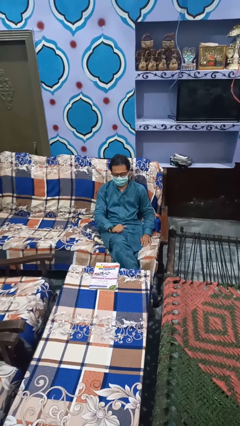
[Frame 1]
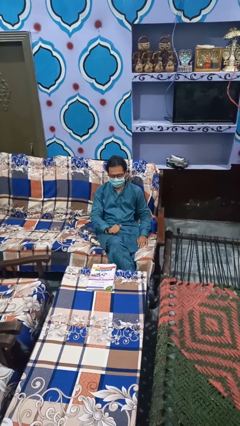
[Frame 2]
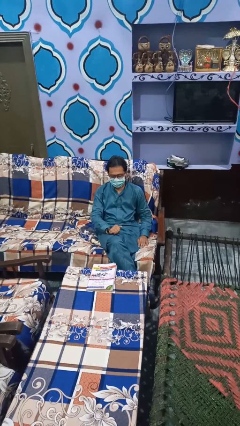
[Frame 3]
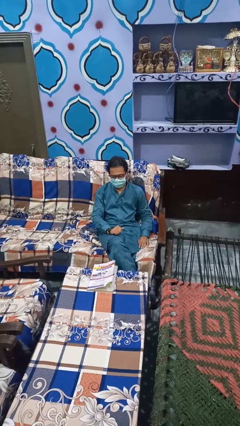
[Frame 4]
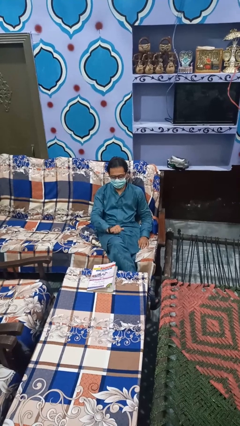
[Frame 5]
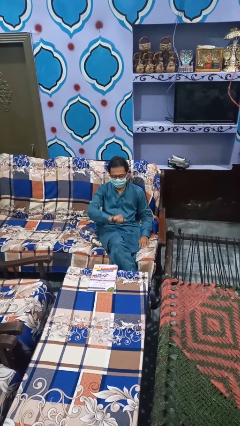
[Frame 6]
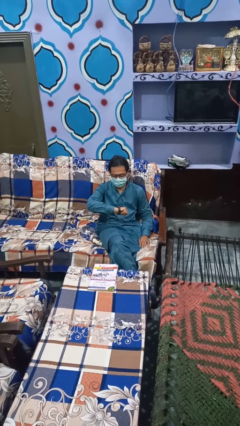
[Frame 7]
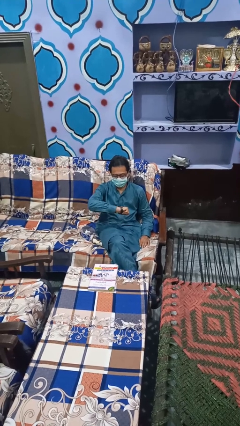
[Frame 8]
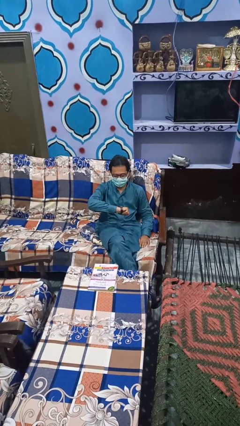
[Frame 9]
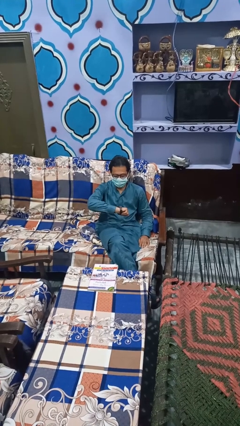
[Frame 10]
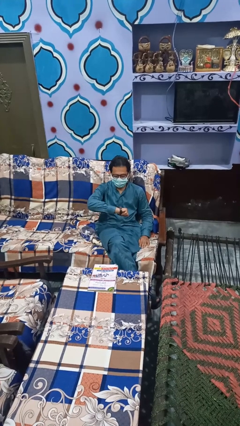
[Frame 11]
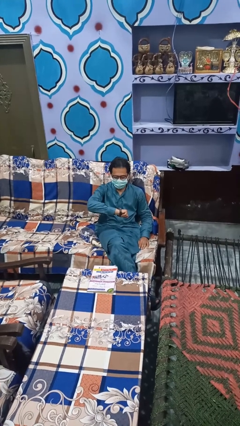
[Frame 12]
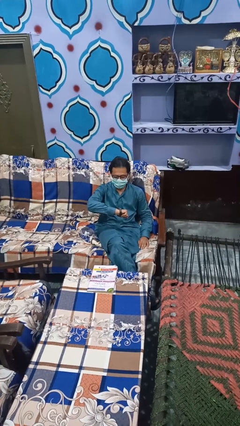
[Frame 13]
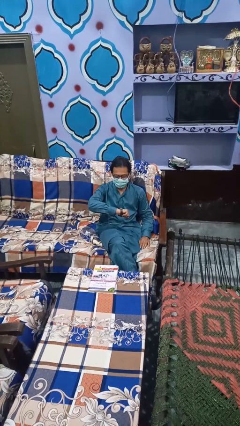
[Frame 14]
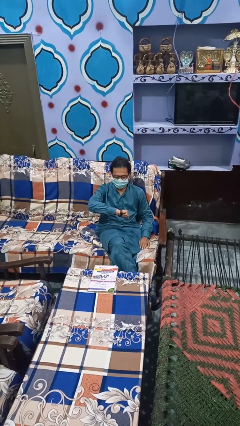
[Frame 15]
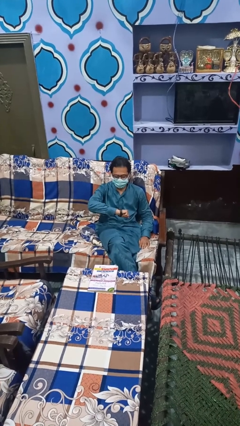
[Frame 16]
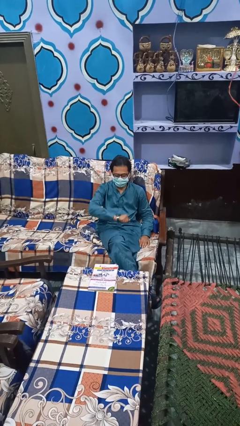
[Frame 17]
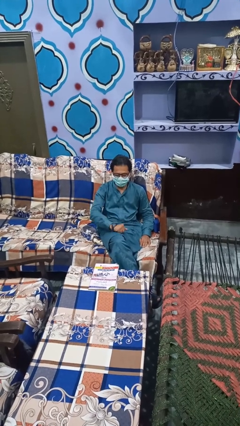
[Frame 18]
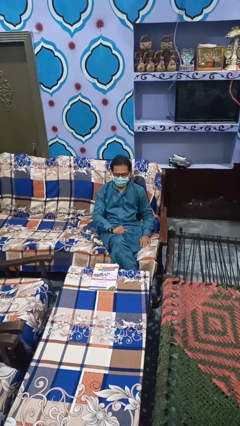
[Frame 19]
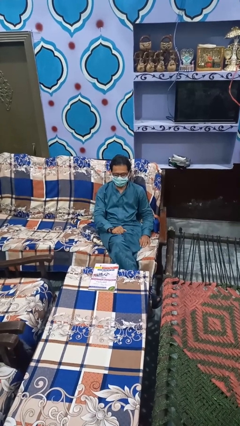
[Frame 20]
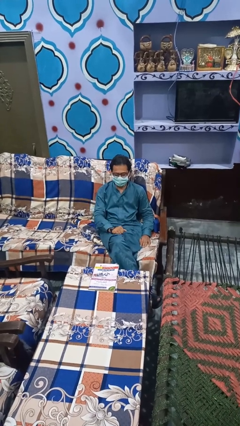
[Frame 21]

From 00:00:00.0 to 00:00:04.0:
person looks at wristwatch

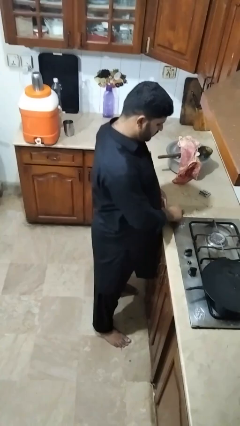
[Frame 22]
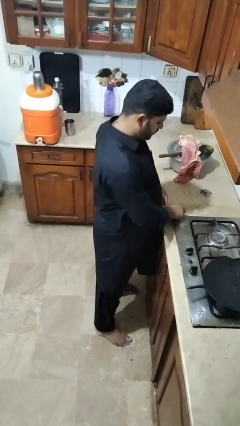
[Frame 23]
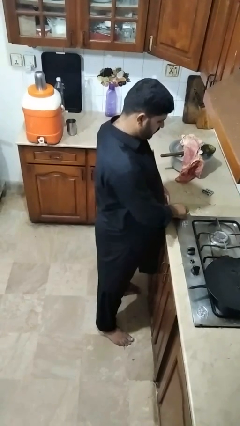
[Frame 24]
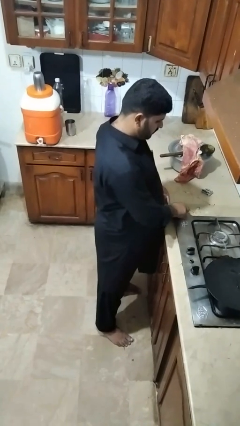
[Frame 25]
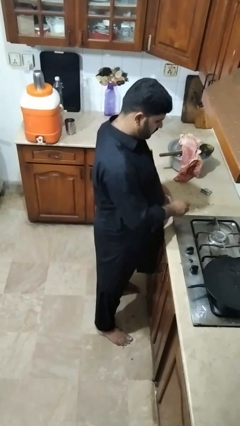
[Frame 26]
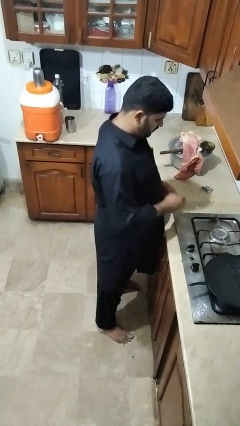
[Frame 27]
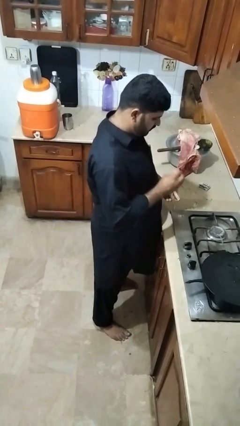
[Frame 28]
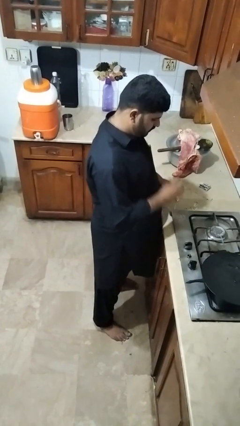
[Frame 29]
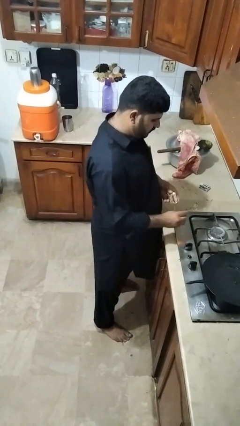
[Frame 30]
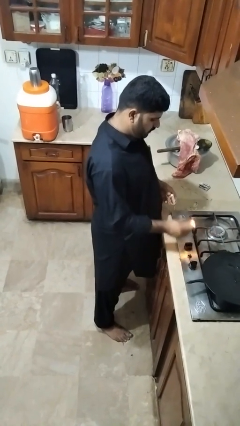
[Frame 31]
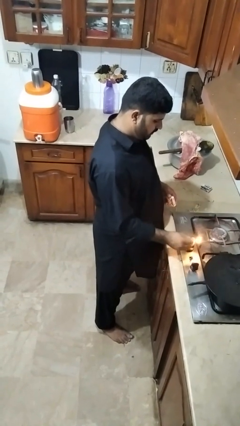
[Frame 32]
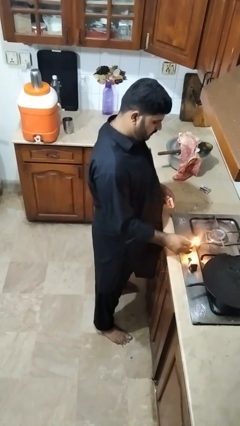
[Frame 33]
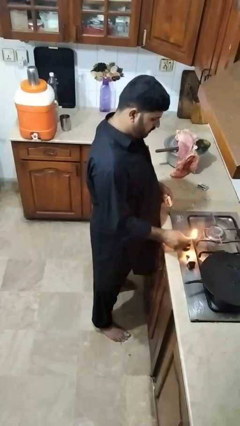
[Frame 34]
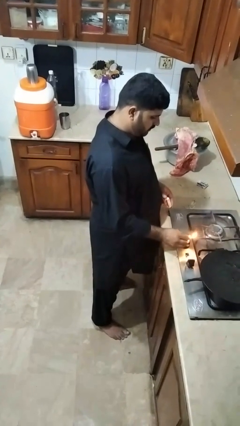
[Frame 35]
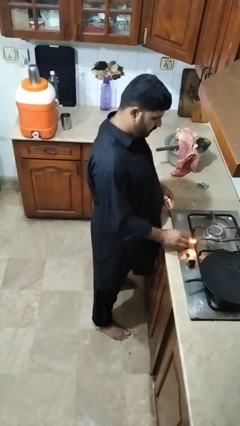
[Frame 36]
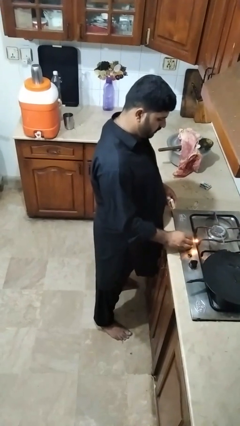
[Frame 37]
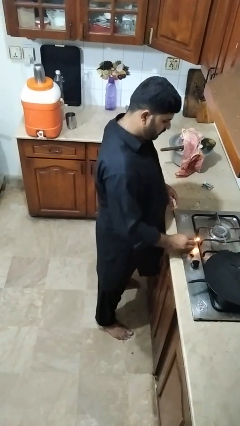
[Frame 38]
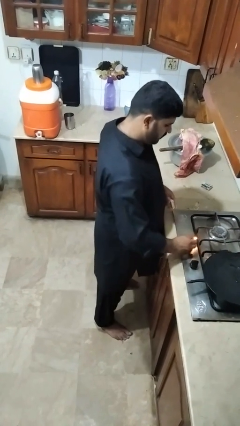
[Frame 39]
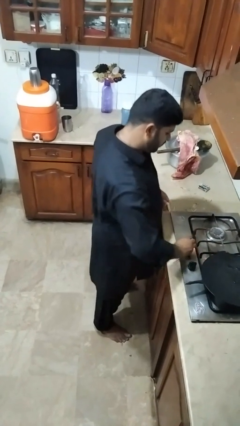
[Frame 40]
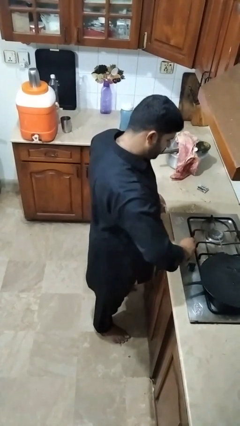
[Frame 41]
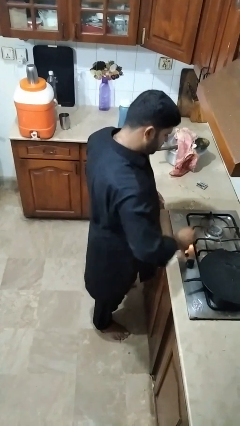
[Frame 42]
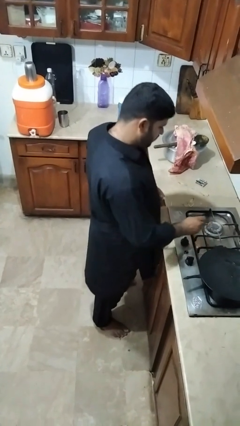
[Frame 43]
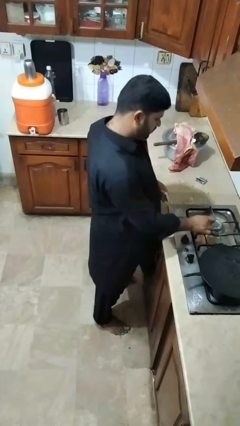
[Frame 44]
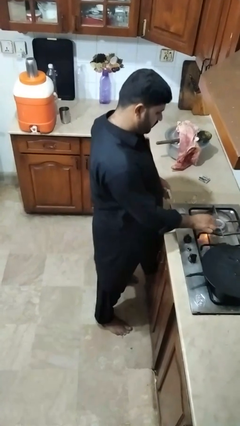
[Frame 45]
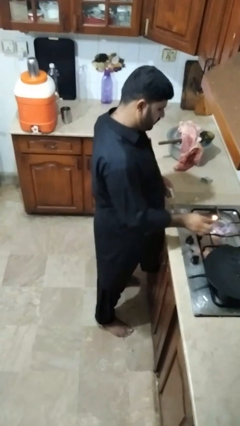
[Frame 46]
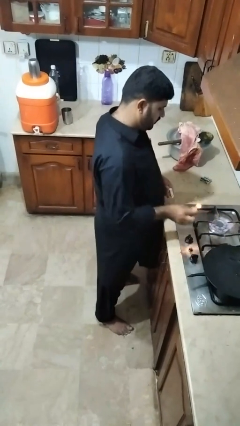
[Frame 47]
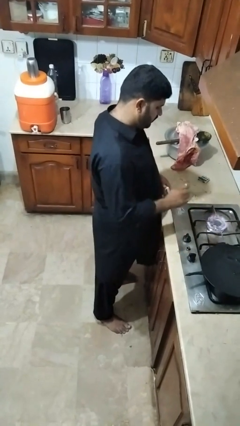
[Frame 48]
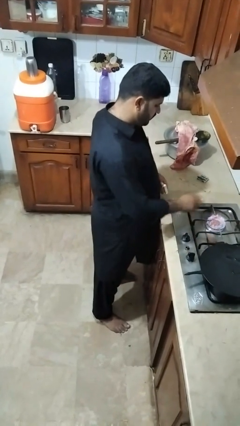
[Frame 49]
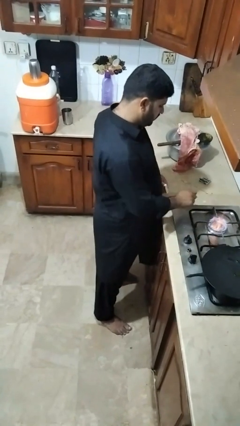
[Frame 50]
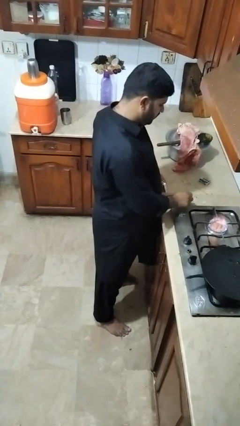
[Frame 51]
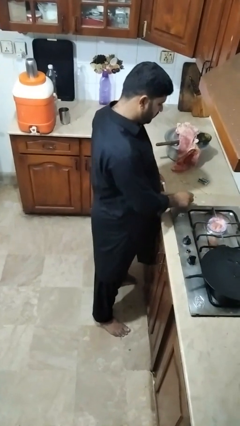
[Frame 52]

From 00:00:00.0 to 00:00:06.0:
person turns on stovetop

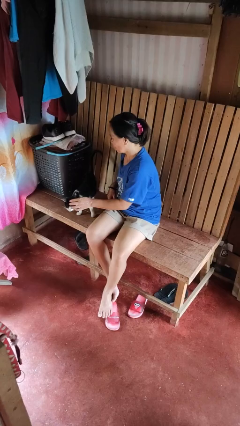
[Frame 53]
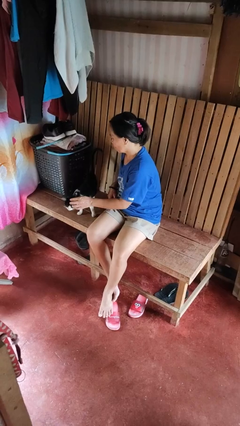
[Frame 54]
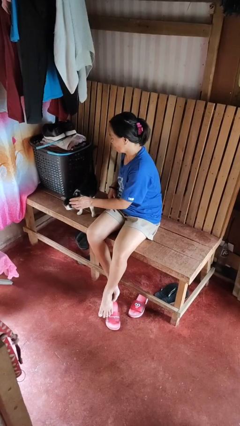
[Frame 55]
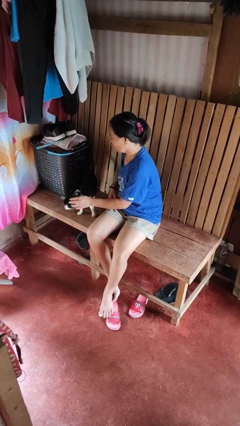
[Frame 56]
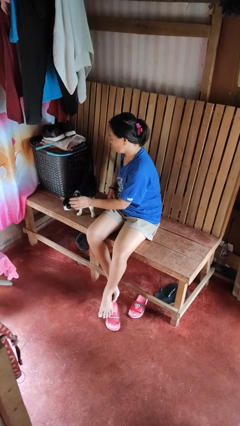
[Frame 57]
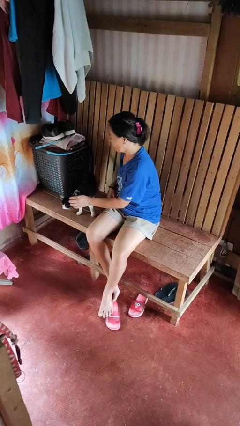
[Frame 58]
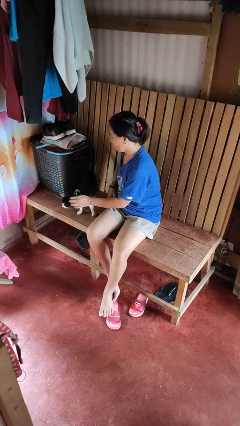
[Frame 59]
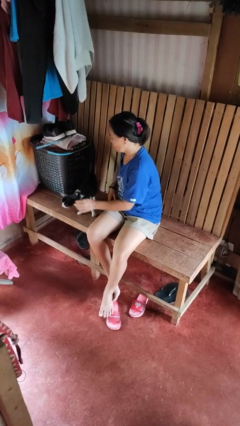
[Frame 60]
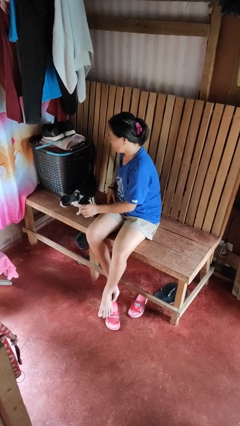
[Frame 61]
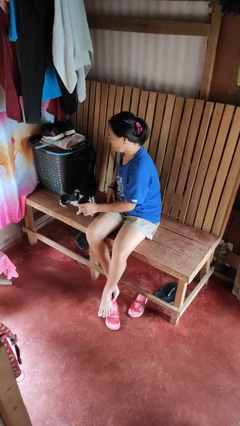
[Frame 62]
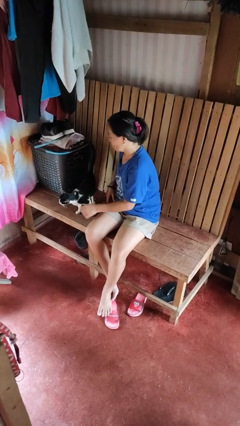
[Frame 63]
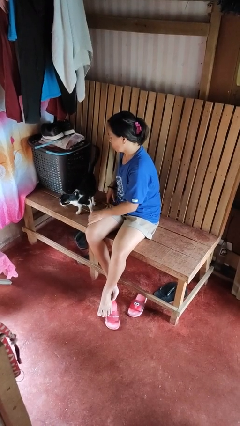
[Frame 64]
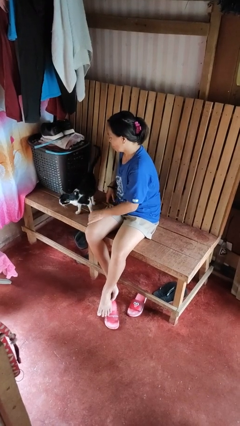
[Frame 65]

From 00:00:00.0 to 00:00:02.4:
person pets cat

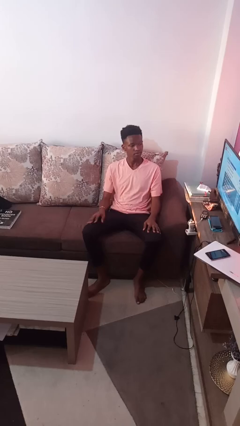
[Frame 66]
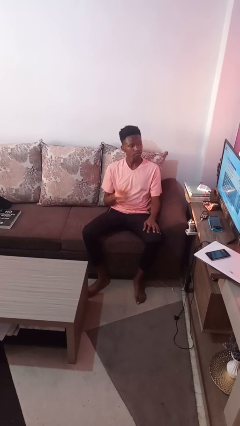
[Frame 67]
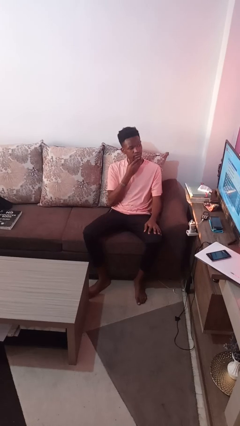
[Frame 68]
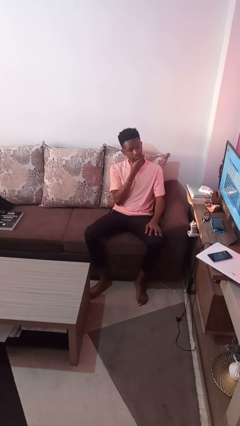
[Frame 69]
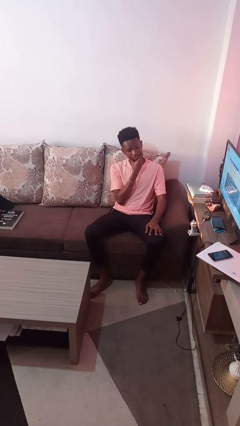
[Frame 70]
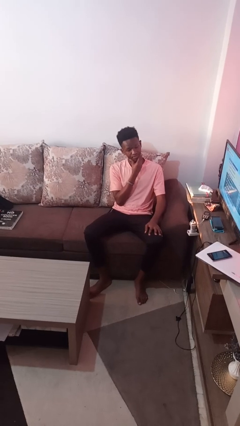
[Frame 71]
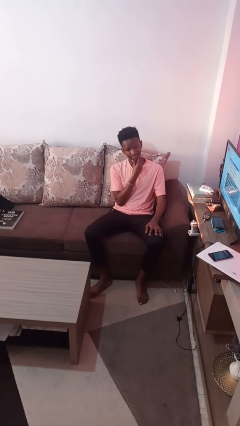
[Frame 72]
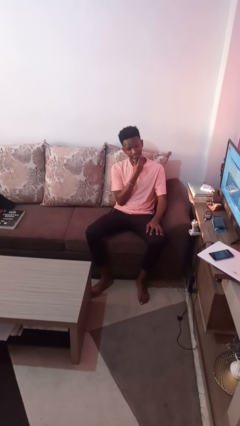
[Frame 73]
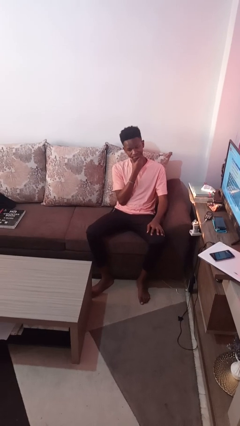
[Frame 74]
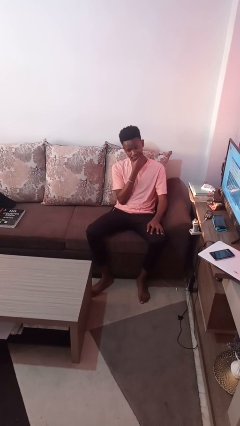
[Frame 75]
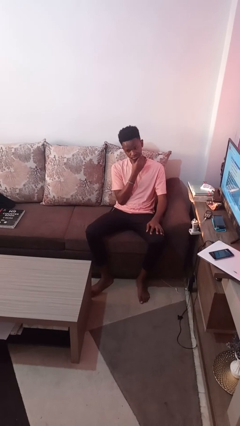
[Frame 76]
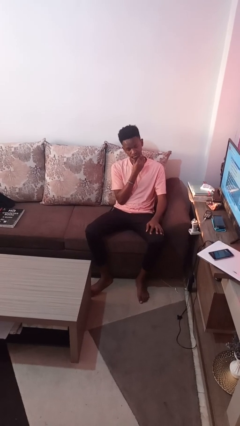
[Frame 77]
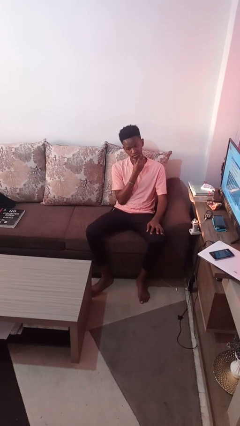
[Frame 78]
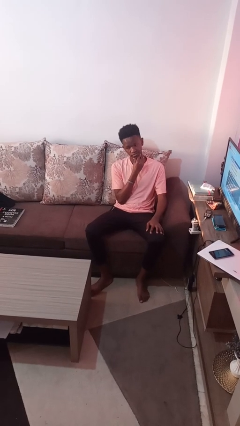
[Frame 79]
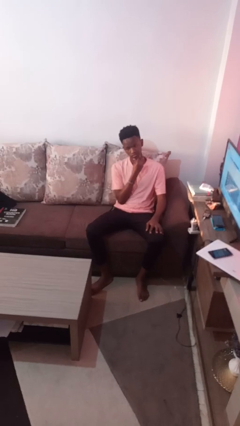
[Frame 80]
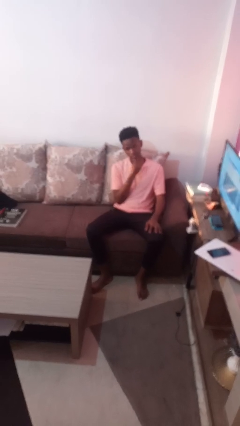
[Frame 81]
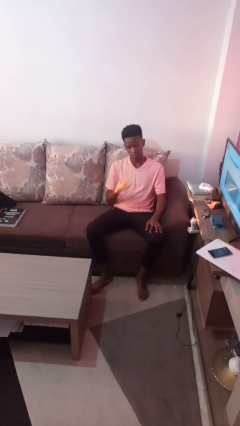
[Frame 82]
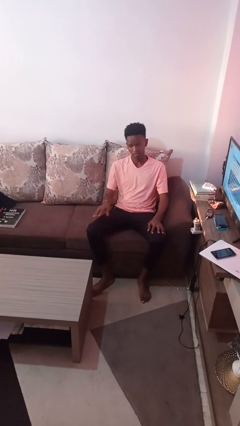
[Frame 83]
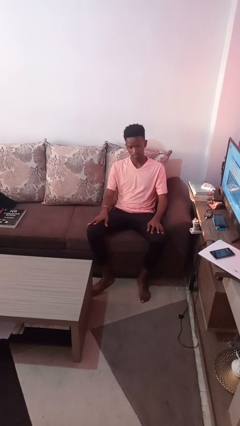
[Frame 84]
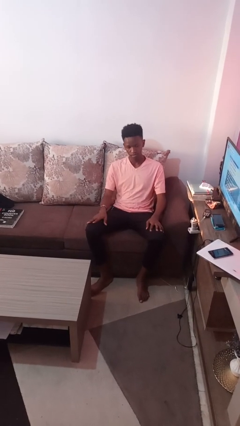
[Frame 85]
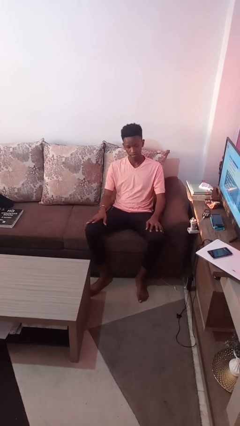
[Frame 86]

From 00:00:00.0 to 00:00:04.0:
person strokes chin

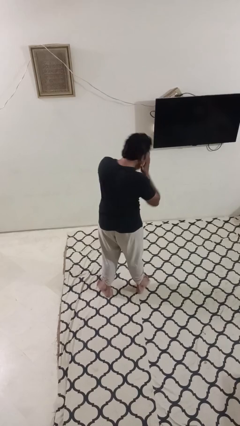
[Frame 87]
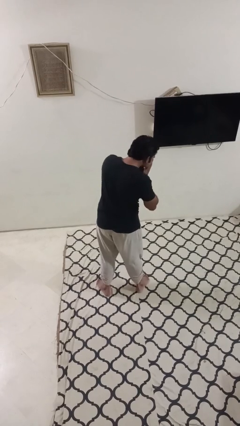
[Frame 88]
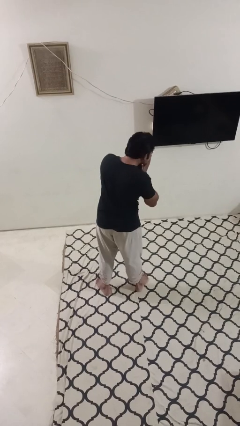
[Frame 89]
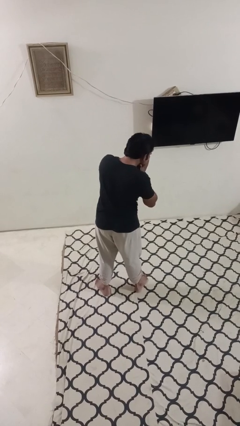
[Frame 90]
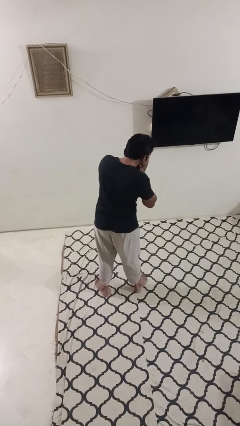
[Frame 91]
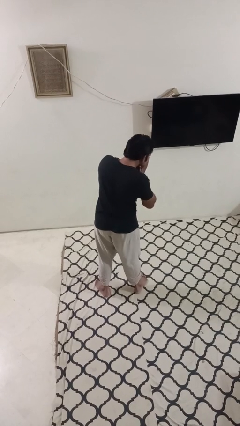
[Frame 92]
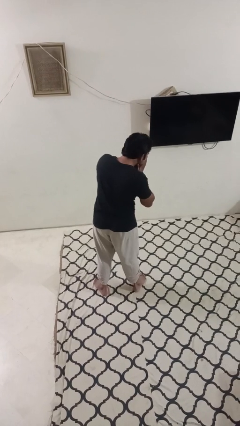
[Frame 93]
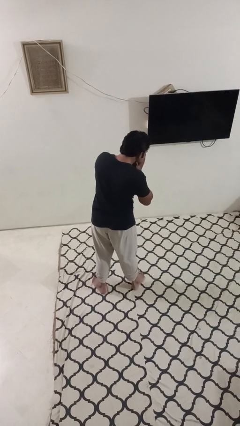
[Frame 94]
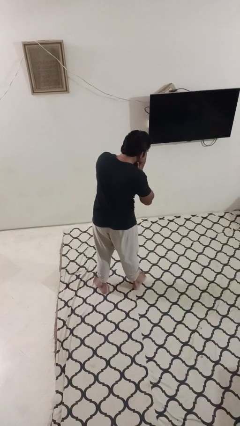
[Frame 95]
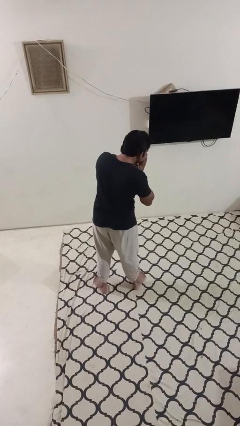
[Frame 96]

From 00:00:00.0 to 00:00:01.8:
person sneezes into hand
